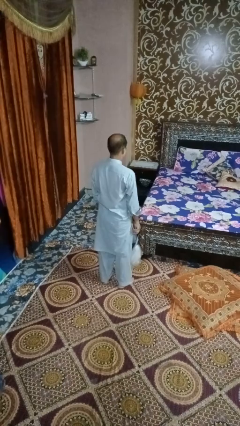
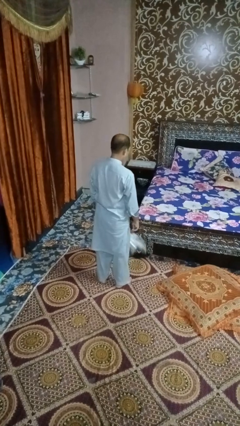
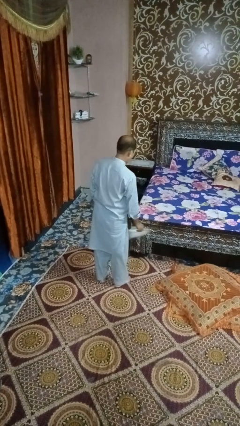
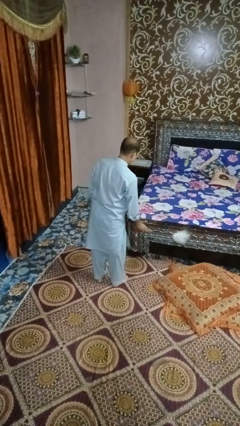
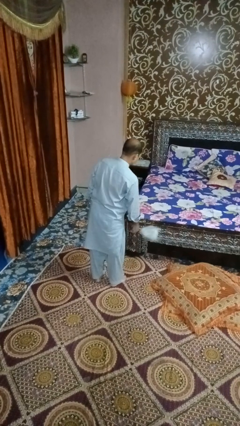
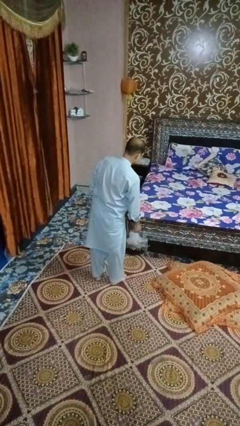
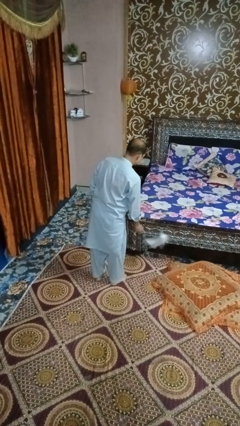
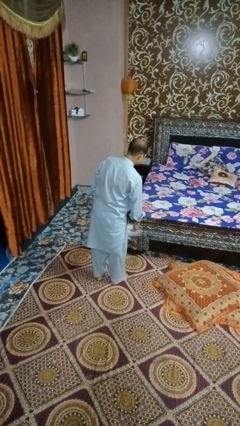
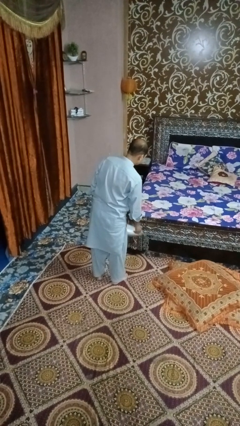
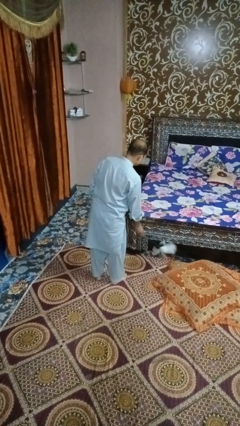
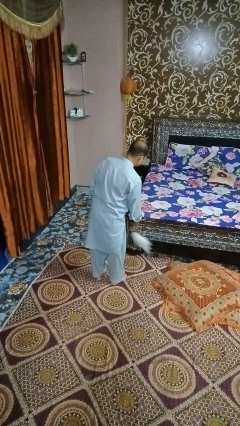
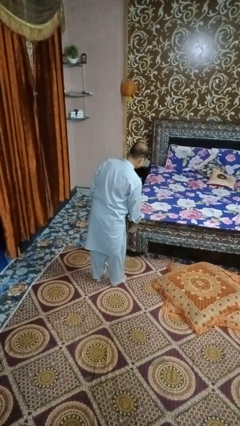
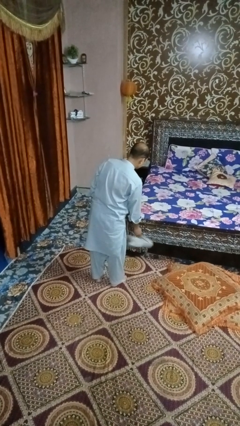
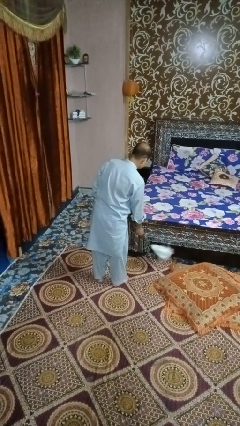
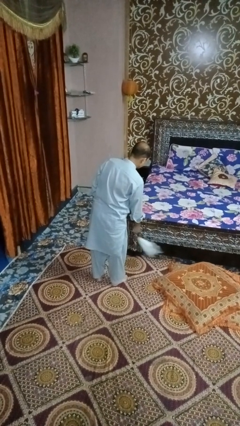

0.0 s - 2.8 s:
person dusts furniture

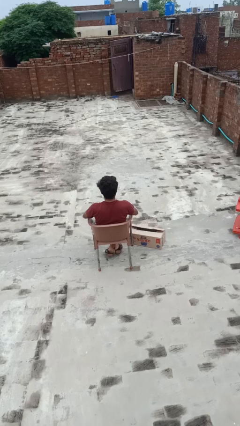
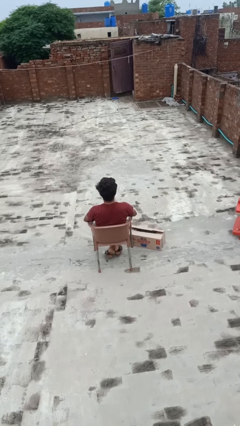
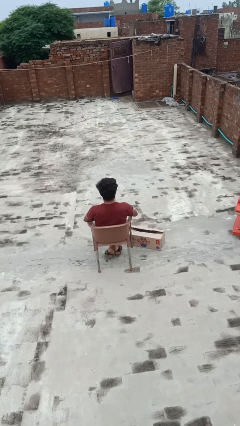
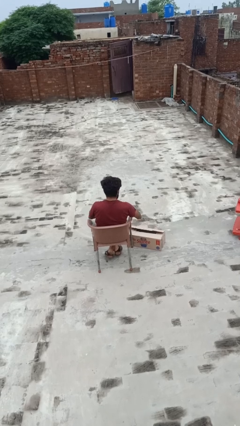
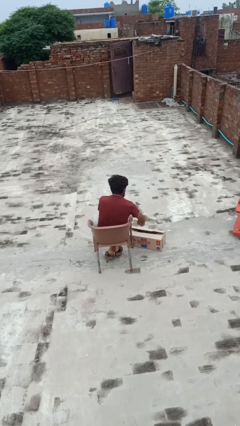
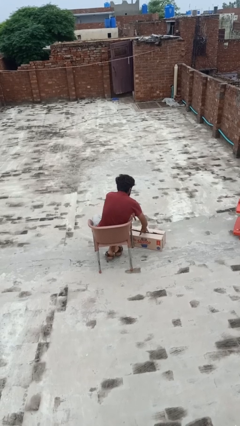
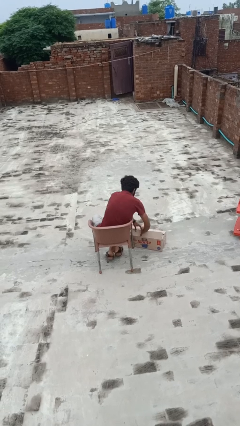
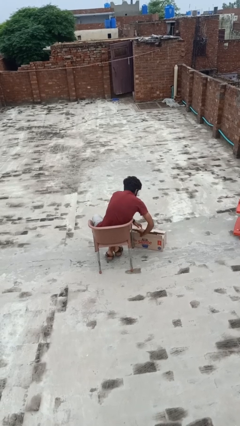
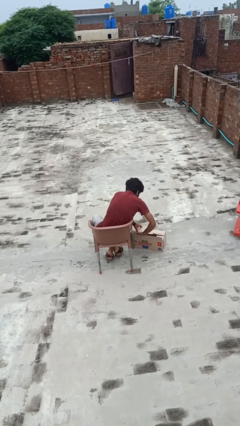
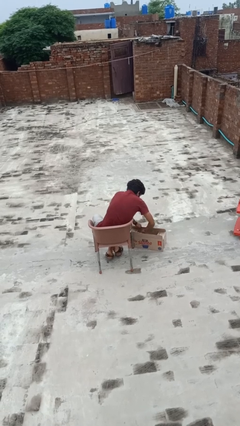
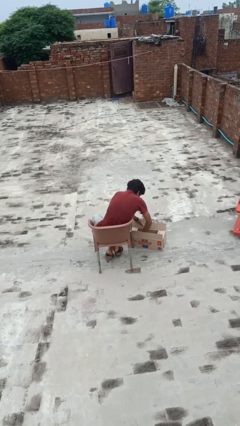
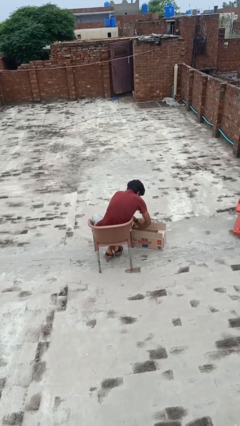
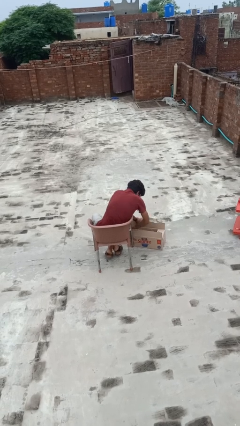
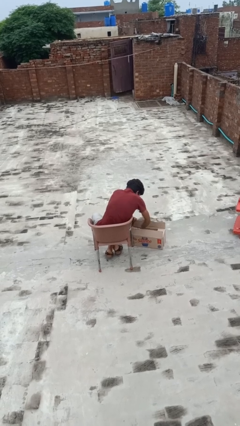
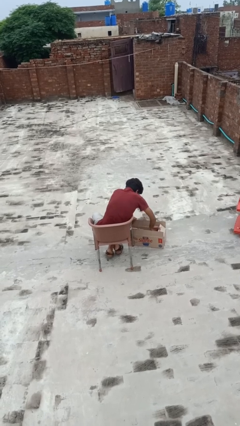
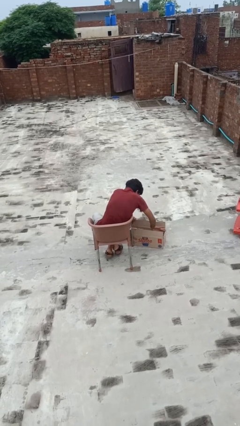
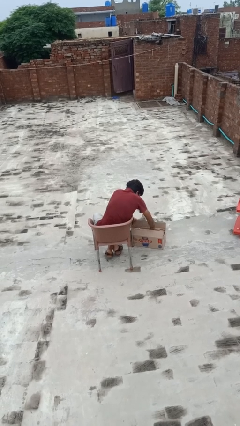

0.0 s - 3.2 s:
person searches in bag

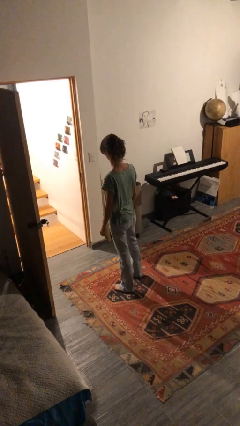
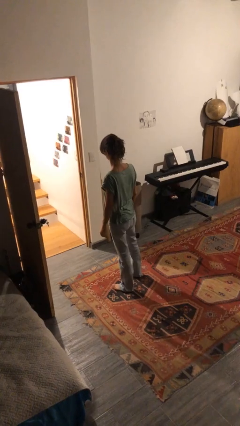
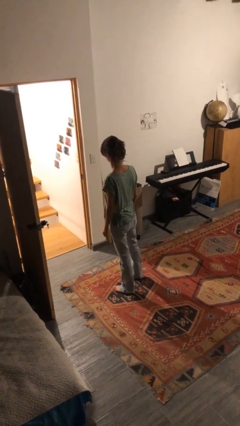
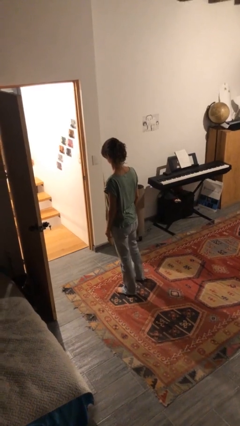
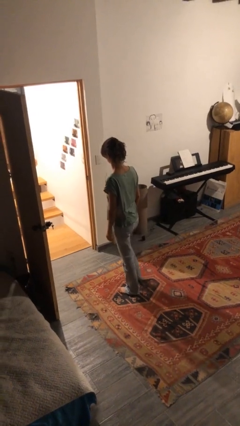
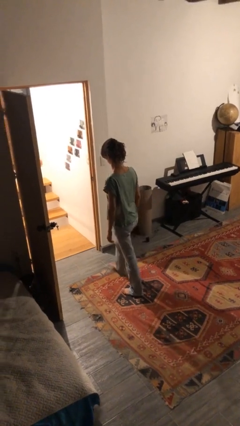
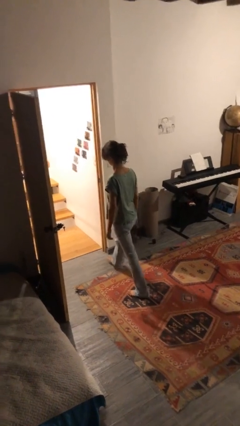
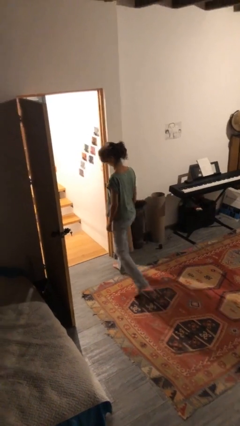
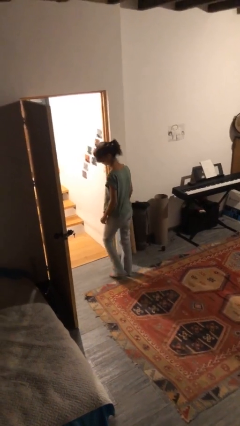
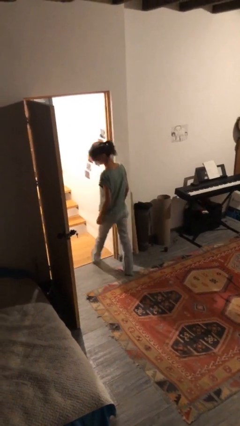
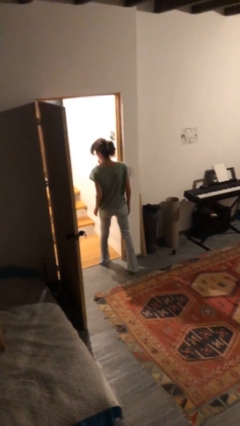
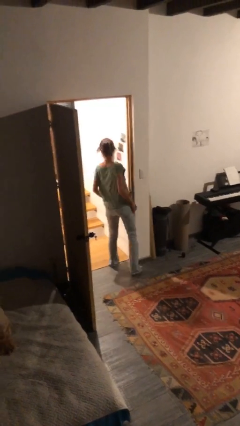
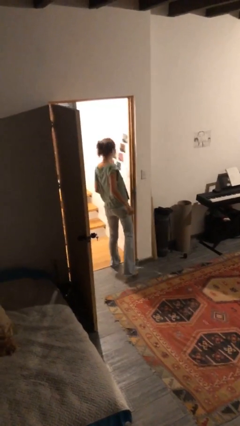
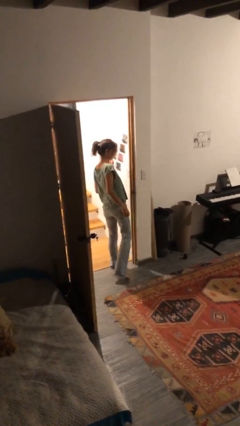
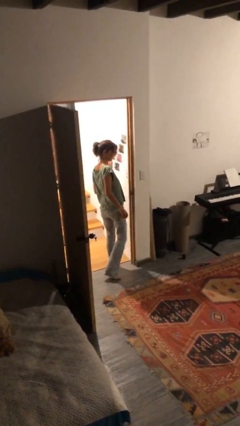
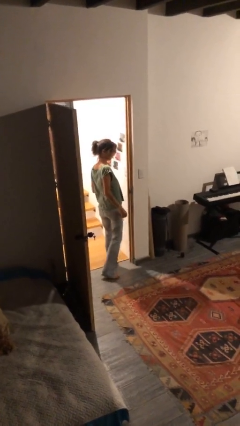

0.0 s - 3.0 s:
person bumps into wall

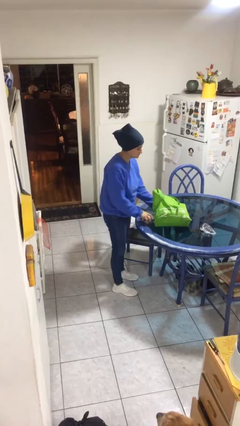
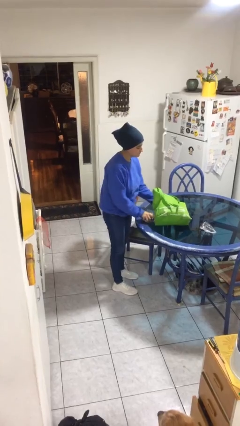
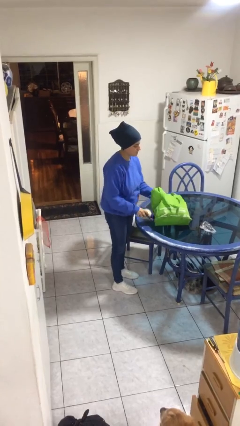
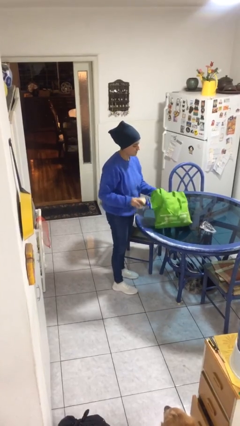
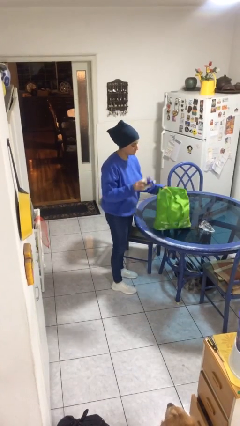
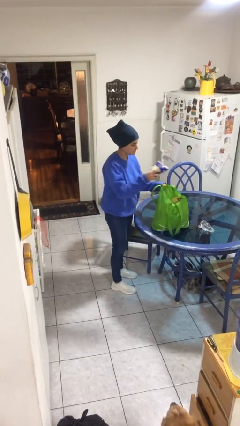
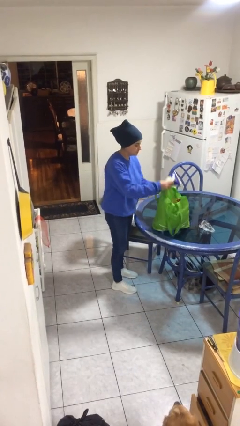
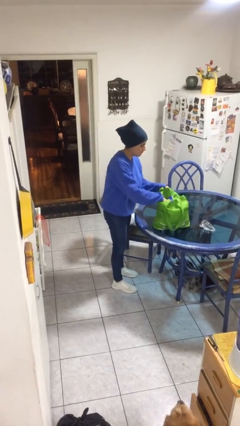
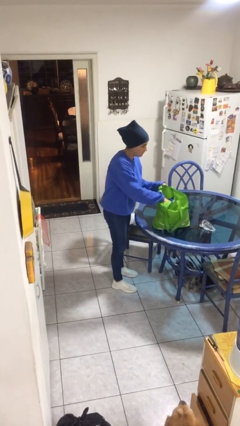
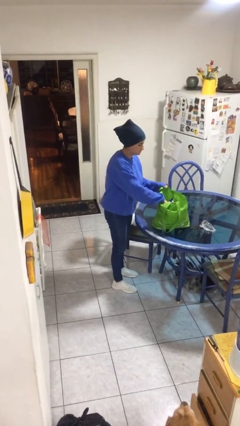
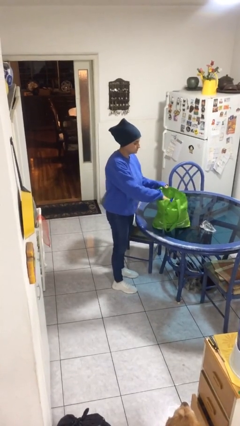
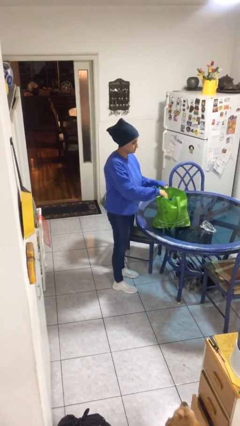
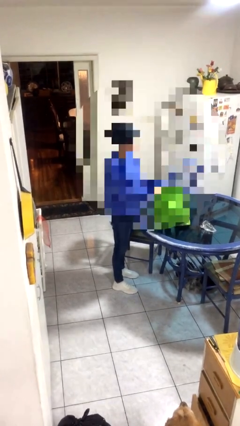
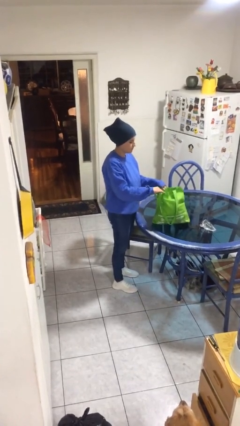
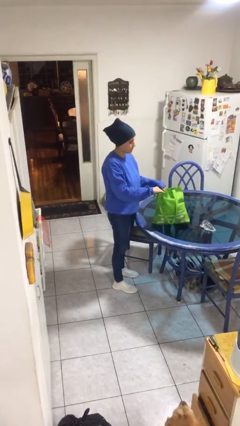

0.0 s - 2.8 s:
person puts object into bag

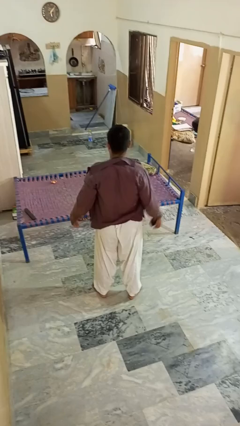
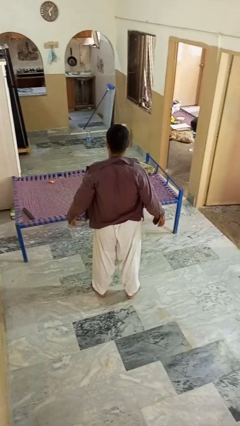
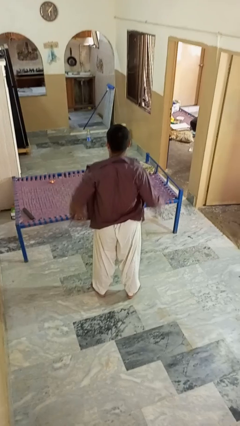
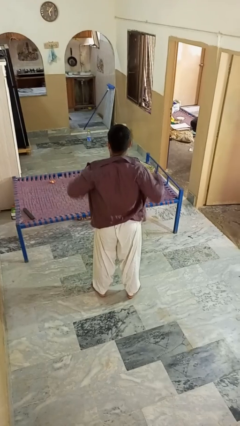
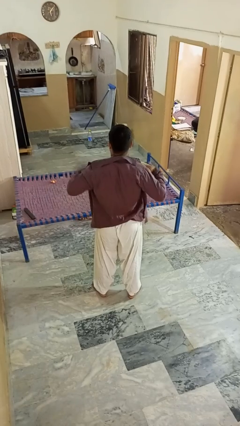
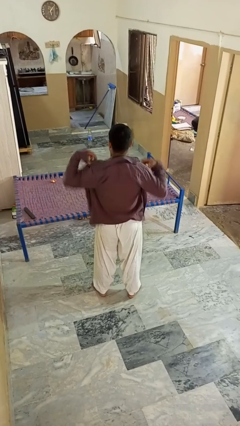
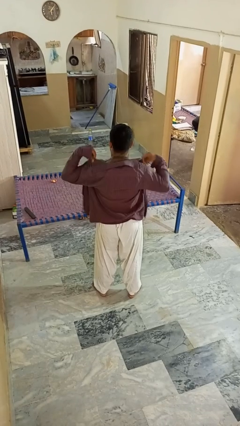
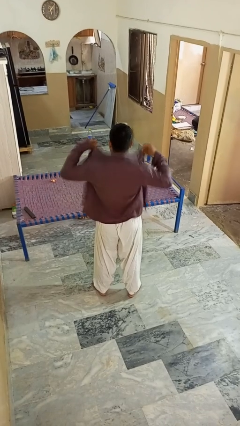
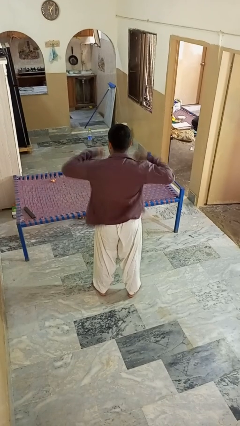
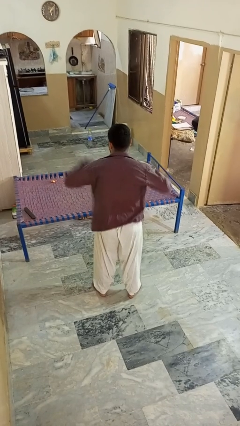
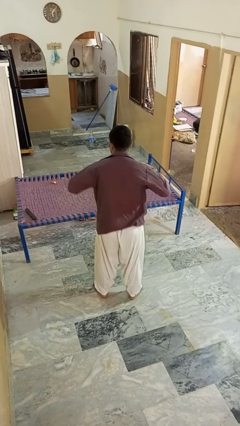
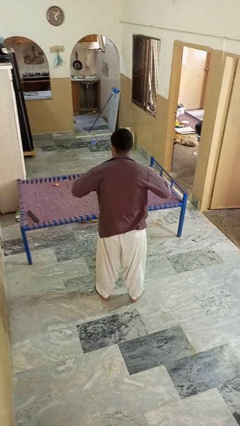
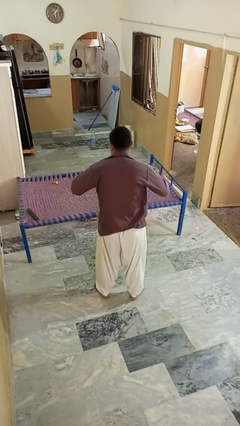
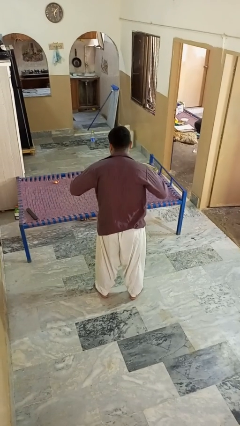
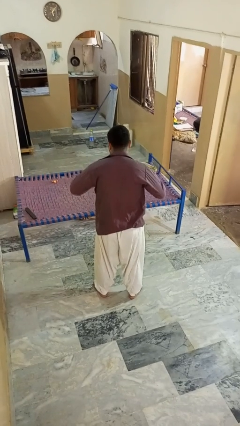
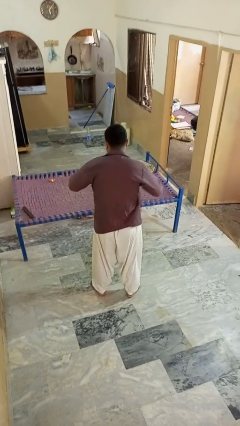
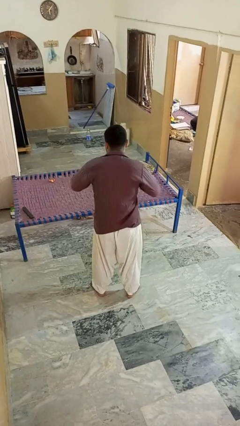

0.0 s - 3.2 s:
person buttons shirt

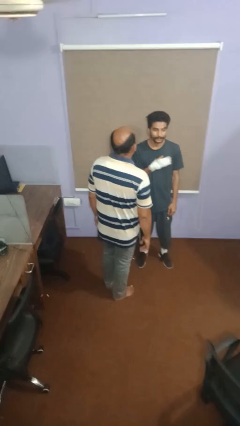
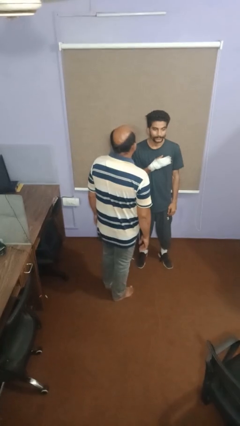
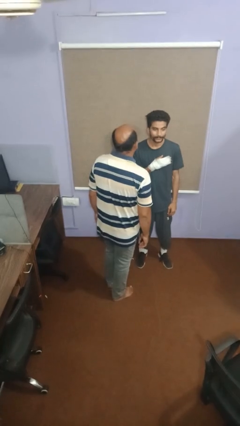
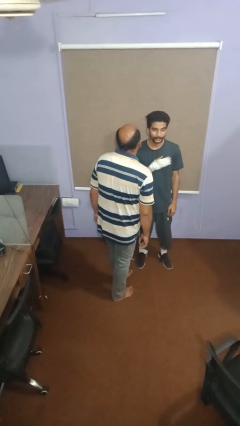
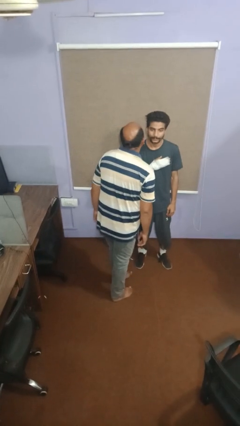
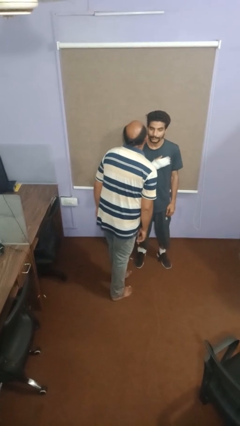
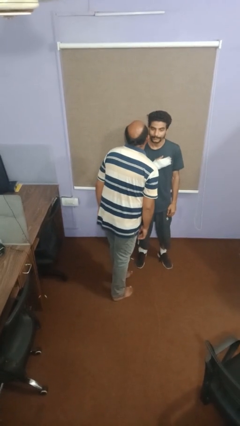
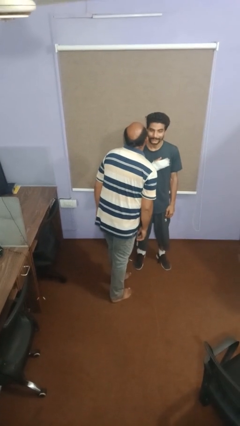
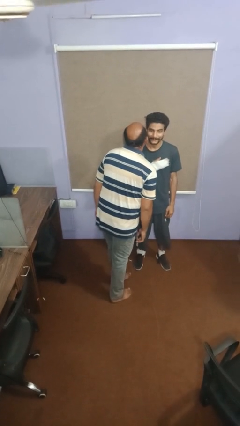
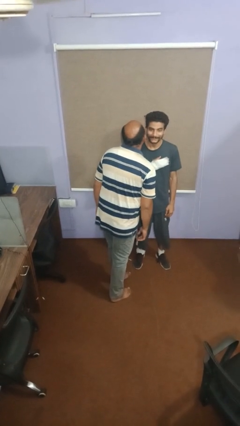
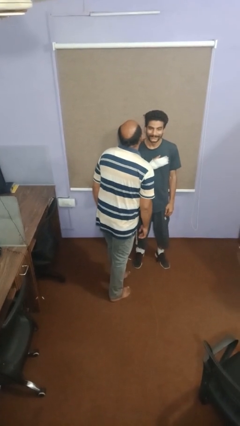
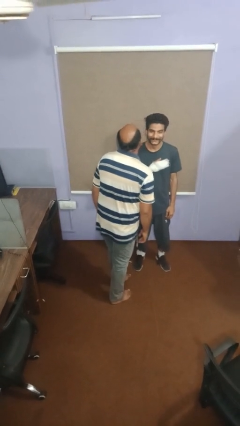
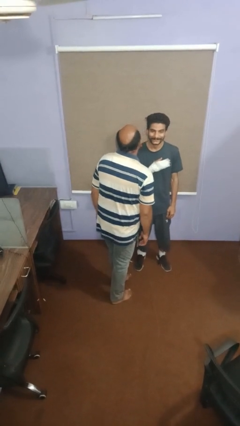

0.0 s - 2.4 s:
person kisses cheek of person
